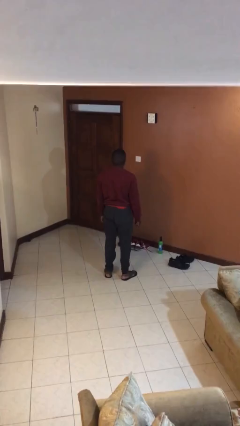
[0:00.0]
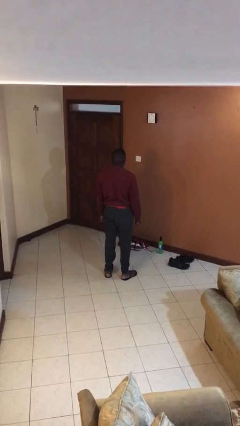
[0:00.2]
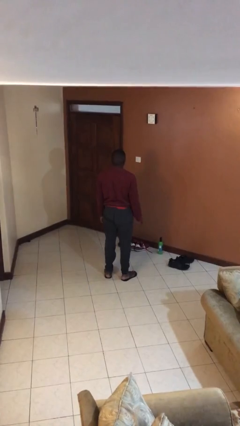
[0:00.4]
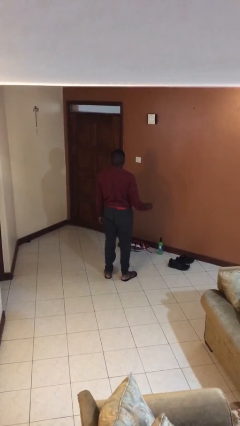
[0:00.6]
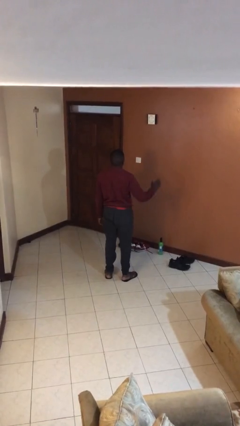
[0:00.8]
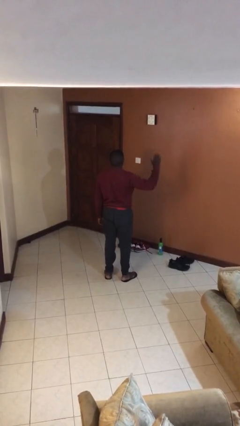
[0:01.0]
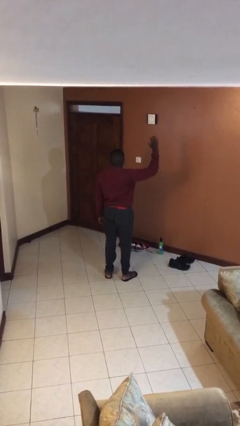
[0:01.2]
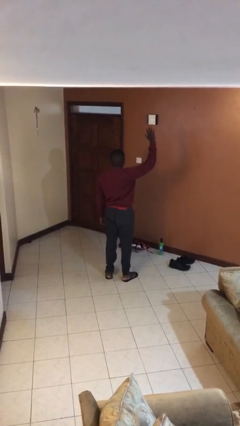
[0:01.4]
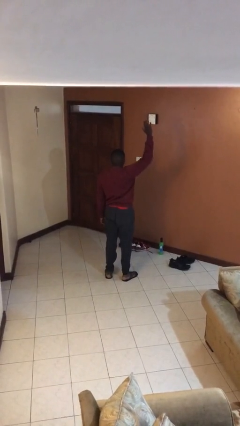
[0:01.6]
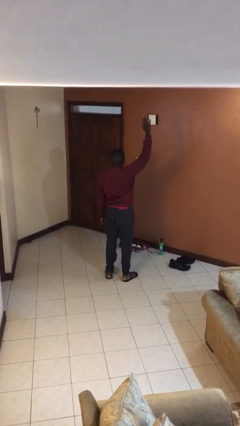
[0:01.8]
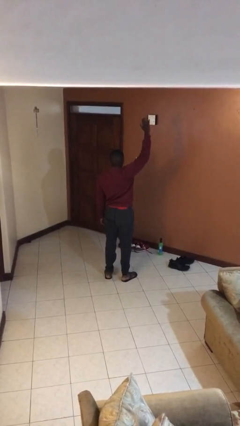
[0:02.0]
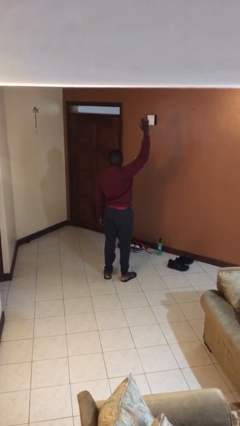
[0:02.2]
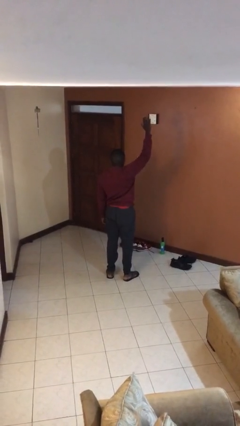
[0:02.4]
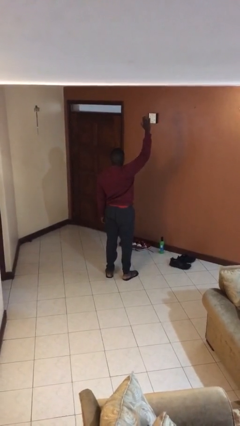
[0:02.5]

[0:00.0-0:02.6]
person gestures raise hand

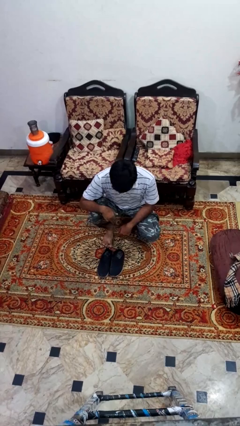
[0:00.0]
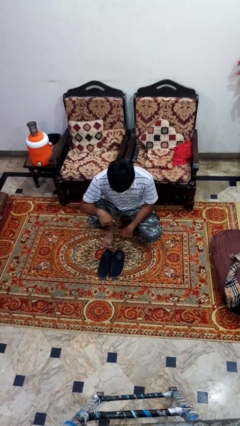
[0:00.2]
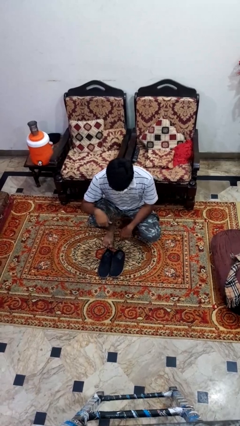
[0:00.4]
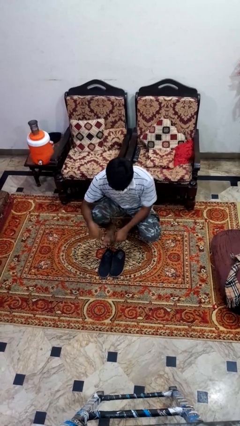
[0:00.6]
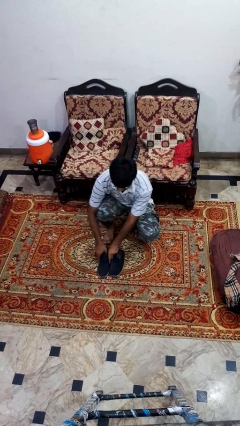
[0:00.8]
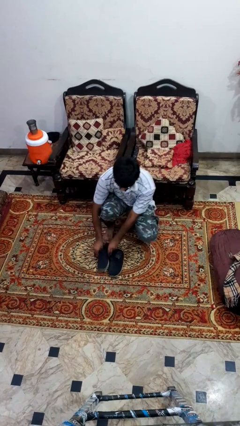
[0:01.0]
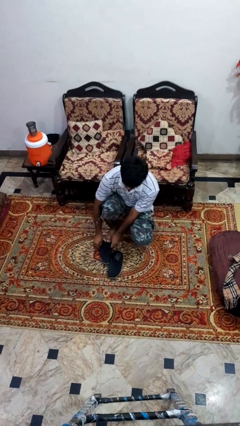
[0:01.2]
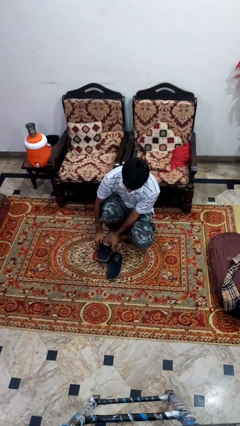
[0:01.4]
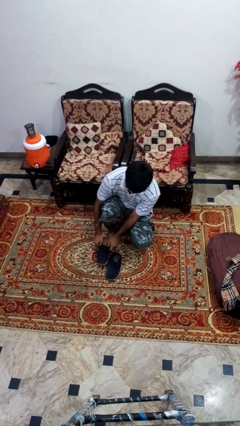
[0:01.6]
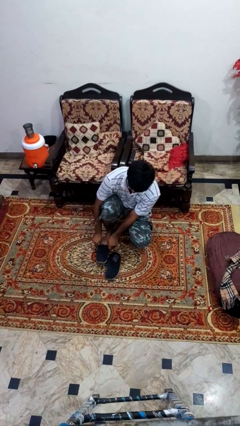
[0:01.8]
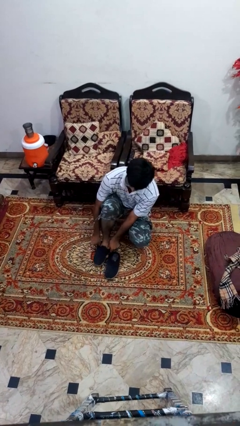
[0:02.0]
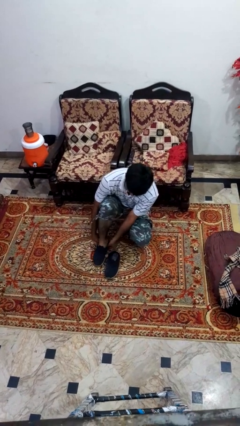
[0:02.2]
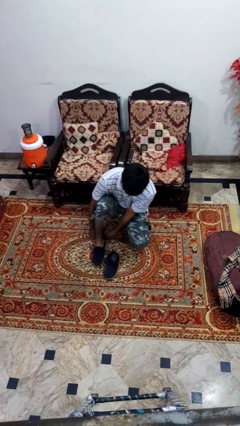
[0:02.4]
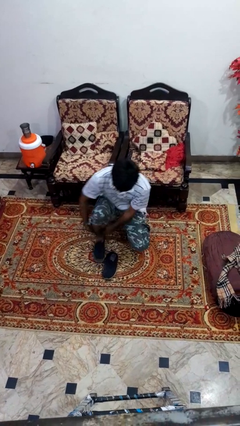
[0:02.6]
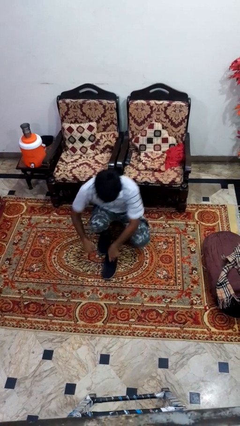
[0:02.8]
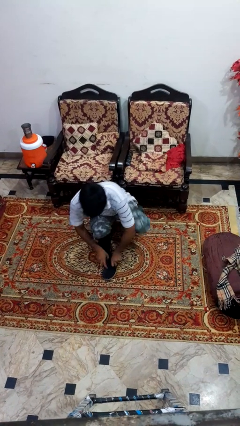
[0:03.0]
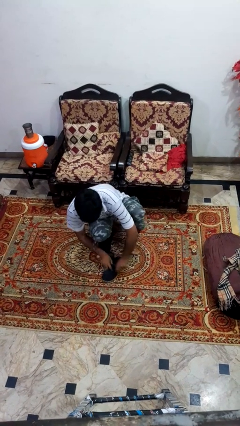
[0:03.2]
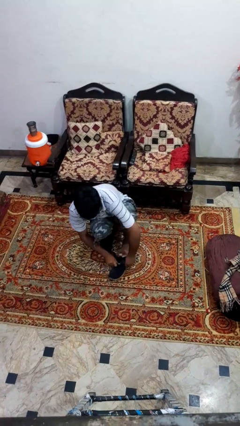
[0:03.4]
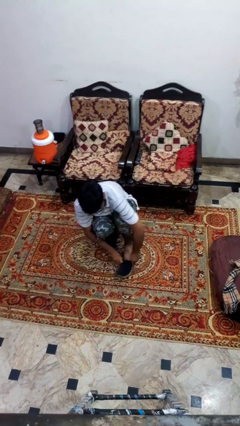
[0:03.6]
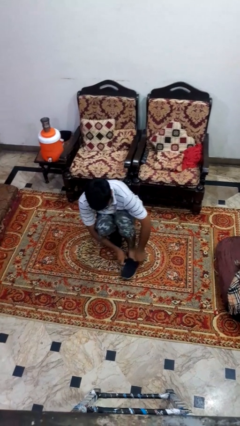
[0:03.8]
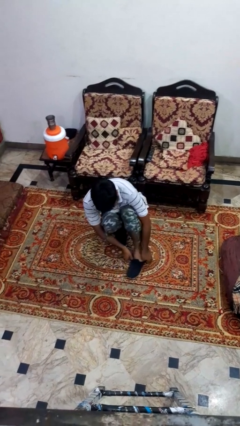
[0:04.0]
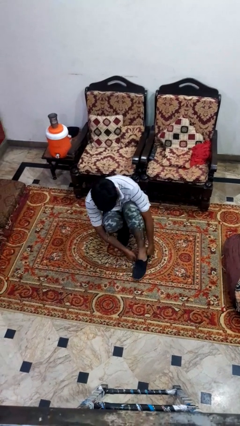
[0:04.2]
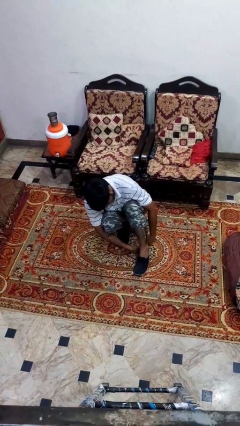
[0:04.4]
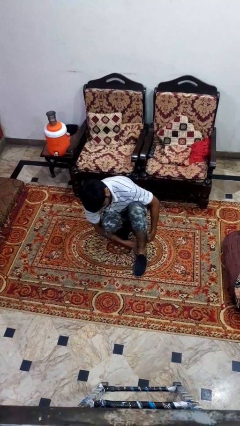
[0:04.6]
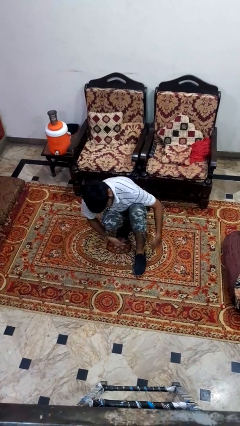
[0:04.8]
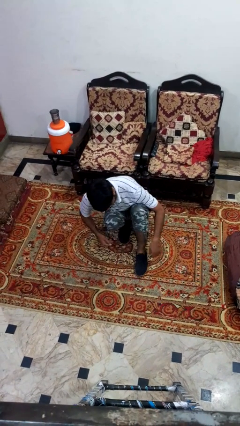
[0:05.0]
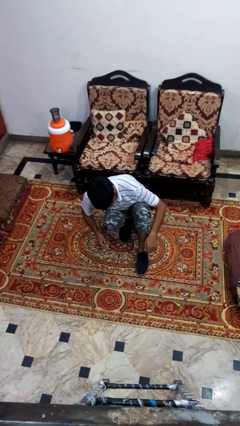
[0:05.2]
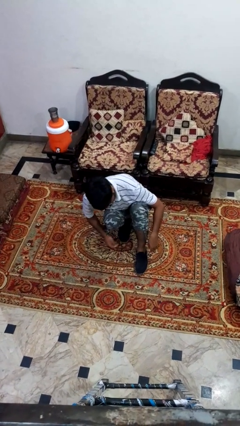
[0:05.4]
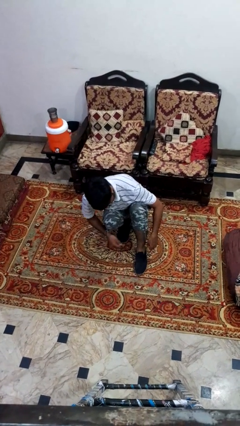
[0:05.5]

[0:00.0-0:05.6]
person puts on shoes

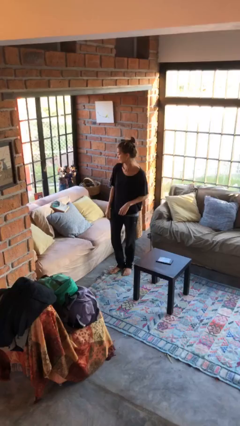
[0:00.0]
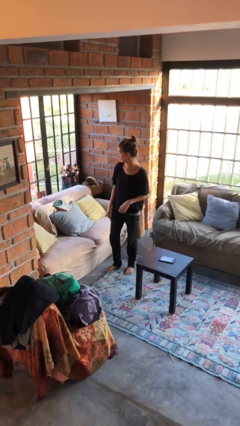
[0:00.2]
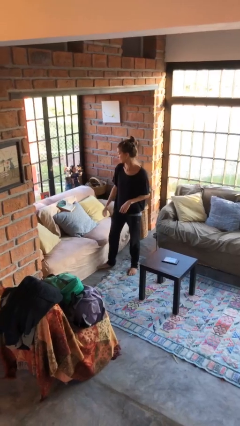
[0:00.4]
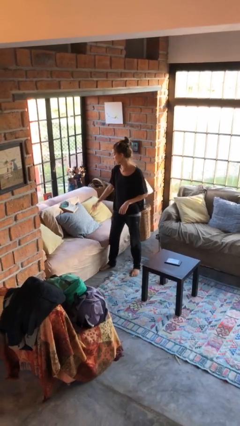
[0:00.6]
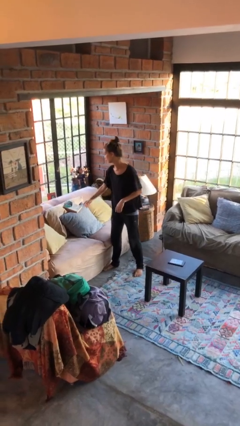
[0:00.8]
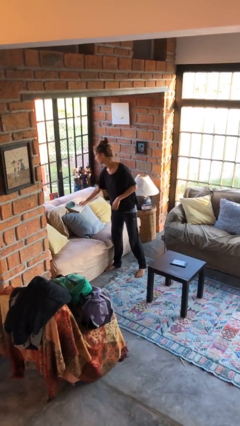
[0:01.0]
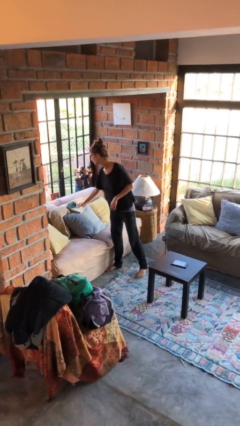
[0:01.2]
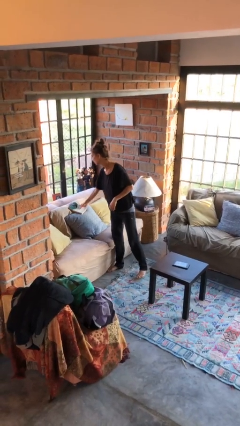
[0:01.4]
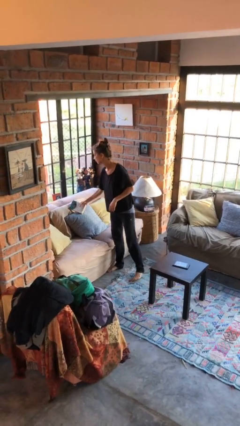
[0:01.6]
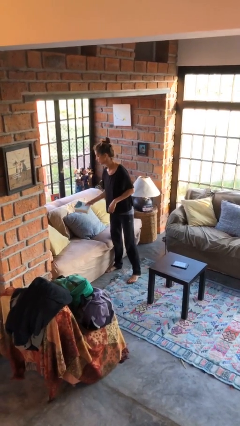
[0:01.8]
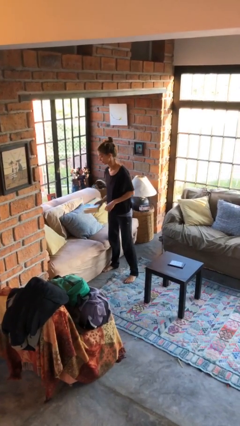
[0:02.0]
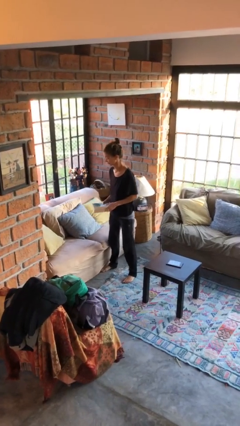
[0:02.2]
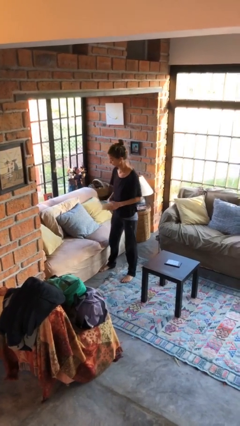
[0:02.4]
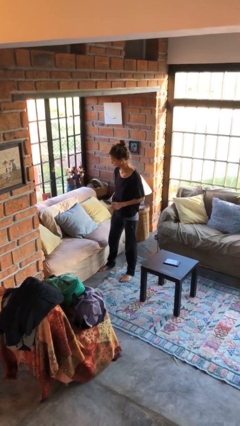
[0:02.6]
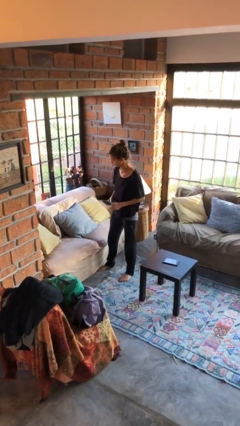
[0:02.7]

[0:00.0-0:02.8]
person picks up object from couch

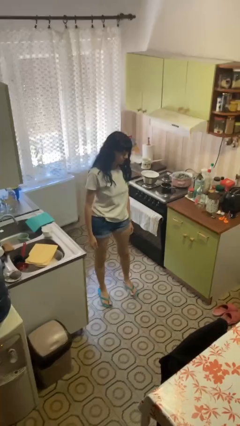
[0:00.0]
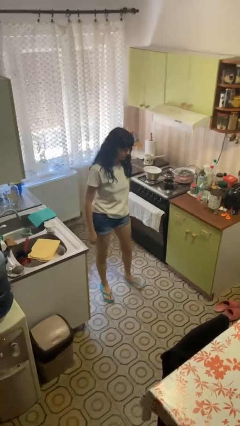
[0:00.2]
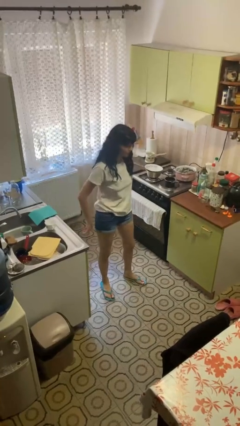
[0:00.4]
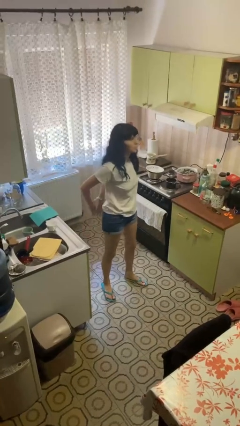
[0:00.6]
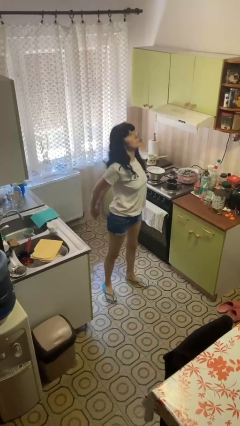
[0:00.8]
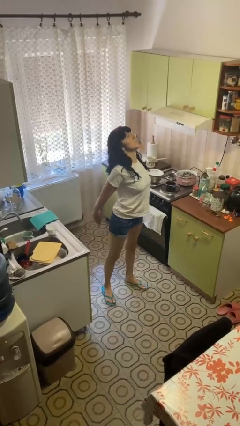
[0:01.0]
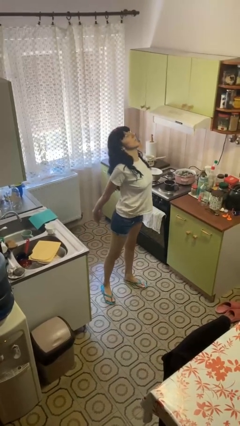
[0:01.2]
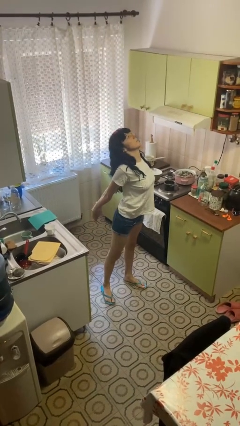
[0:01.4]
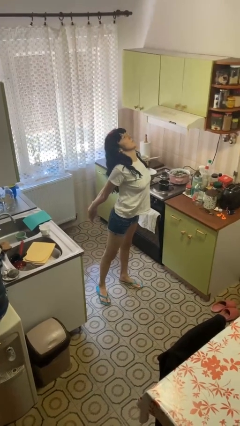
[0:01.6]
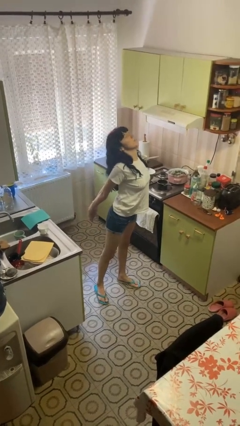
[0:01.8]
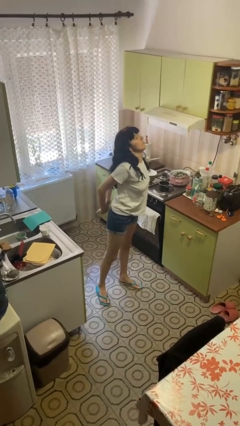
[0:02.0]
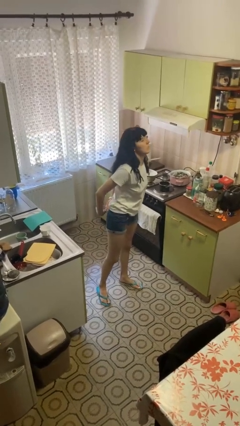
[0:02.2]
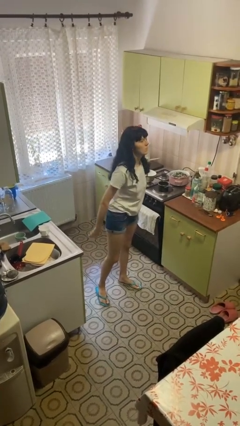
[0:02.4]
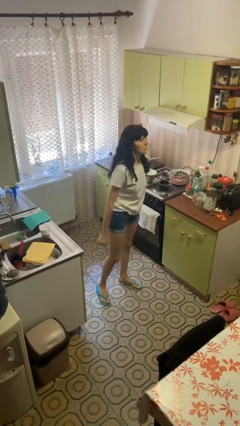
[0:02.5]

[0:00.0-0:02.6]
person stretches back

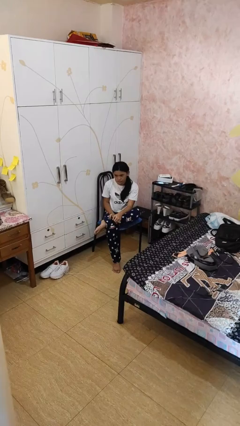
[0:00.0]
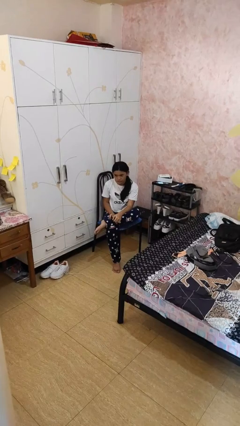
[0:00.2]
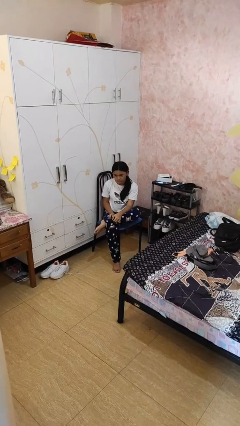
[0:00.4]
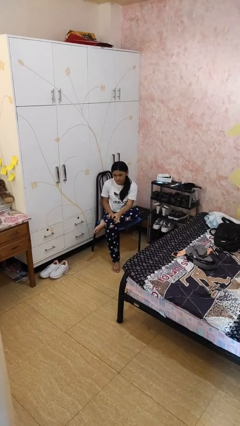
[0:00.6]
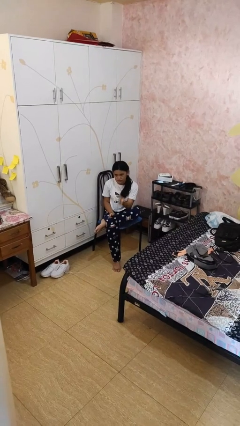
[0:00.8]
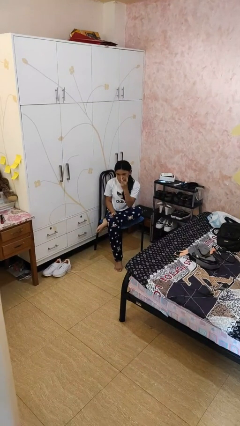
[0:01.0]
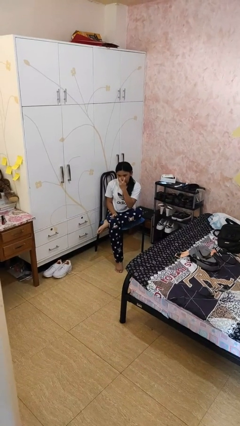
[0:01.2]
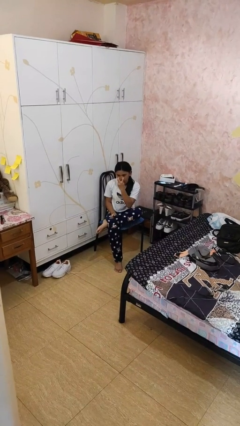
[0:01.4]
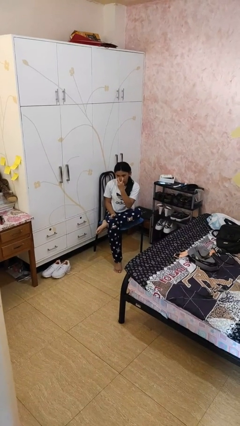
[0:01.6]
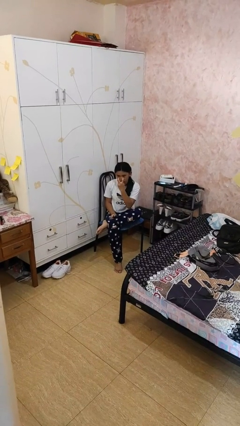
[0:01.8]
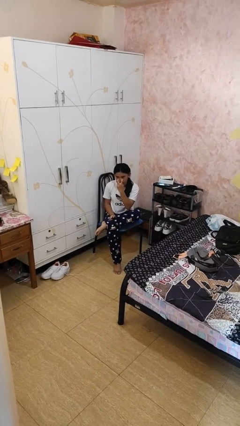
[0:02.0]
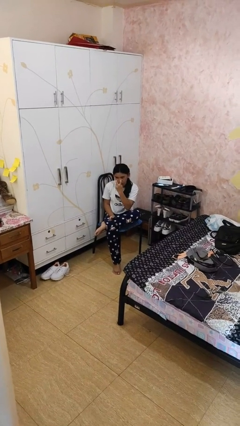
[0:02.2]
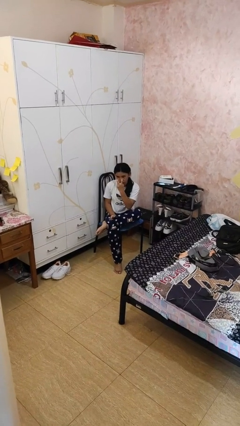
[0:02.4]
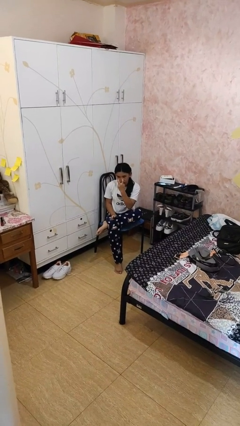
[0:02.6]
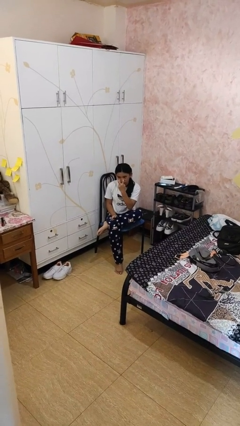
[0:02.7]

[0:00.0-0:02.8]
person gestures watch closely

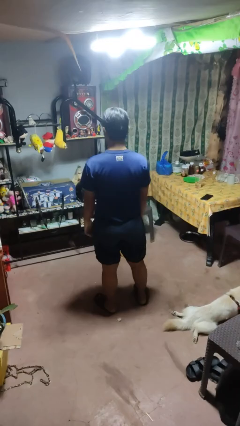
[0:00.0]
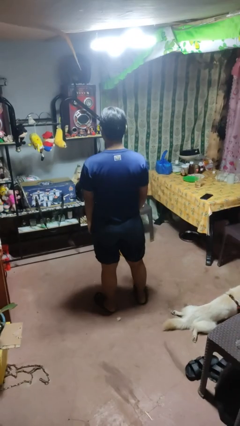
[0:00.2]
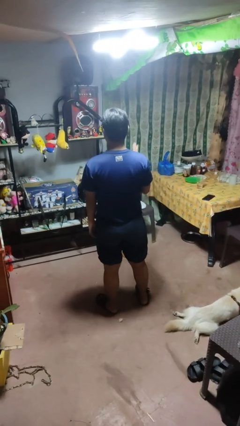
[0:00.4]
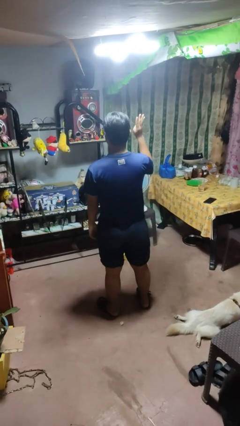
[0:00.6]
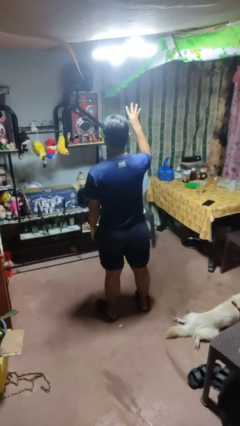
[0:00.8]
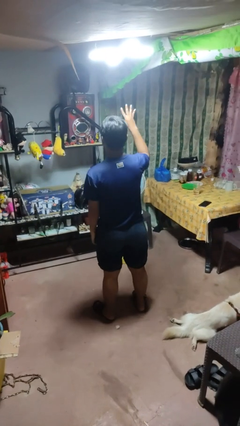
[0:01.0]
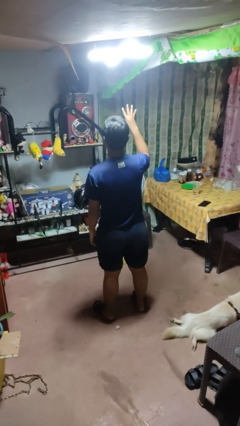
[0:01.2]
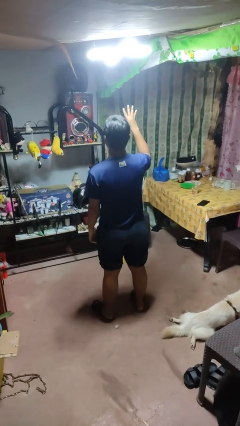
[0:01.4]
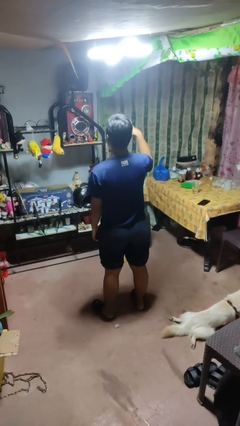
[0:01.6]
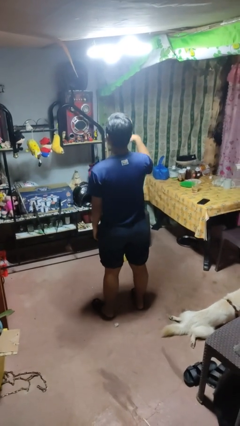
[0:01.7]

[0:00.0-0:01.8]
person gestures number four
